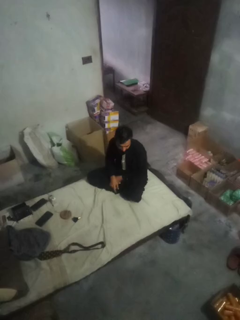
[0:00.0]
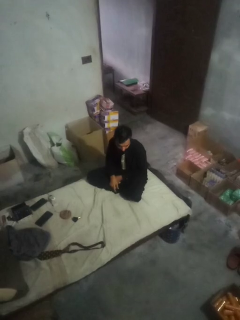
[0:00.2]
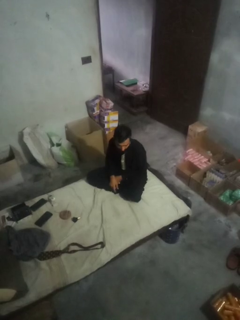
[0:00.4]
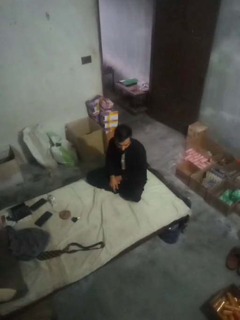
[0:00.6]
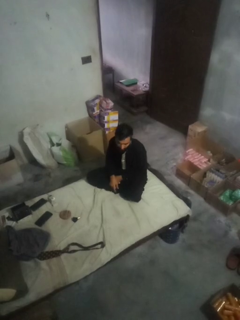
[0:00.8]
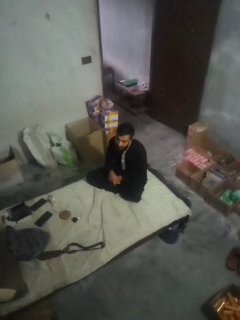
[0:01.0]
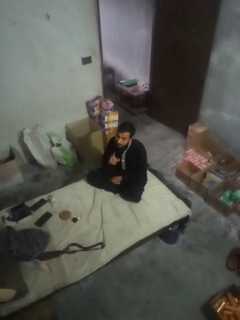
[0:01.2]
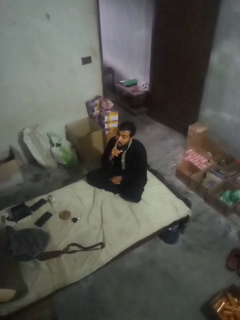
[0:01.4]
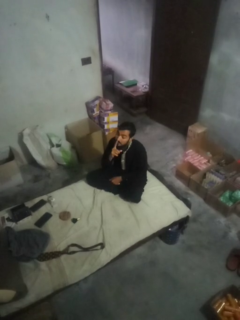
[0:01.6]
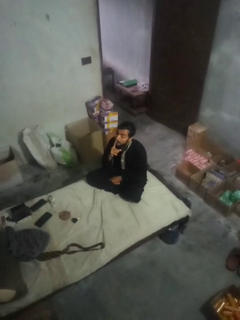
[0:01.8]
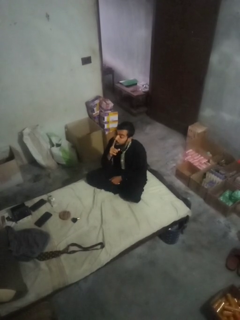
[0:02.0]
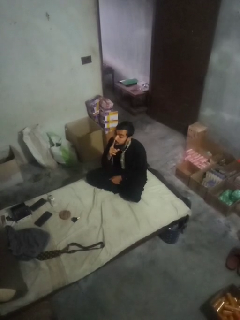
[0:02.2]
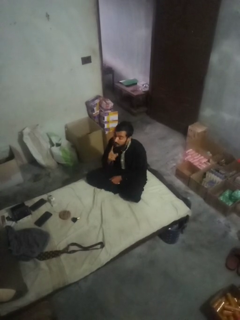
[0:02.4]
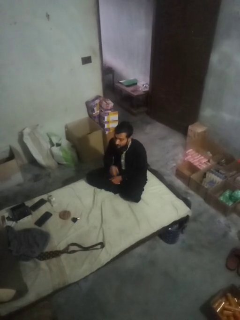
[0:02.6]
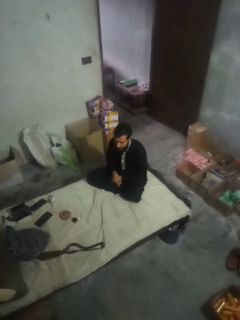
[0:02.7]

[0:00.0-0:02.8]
person gestures be quiet

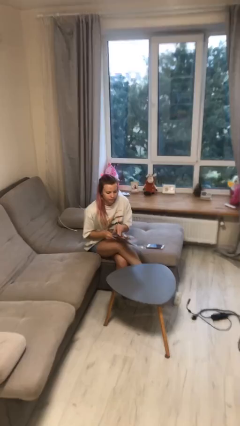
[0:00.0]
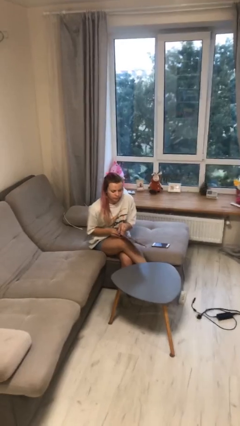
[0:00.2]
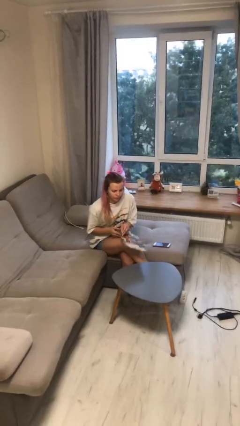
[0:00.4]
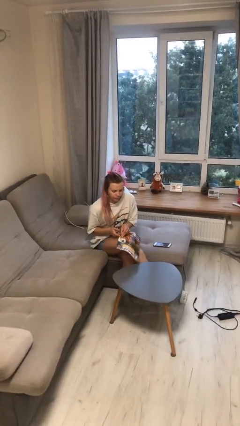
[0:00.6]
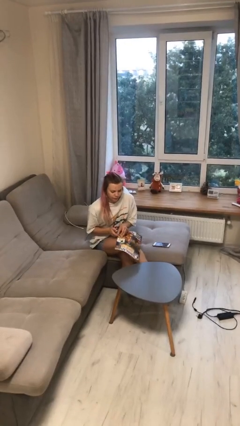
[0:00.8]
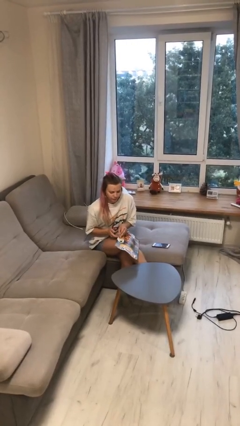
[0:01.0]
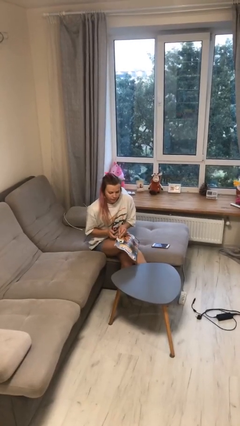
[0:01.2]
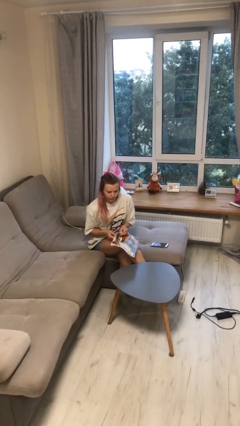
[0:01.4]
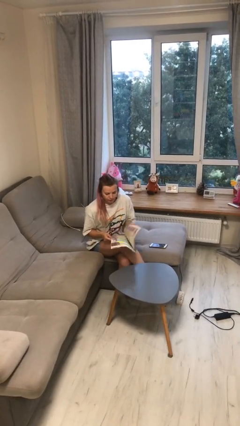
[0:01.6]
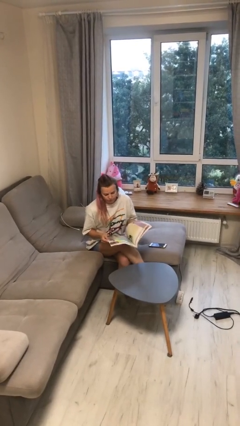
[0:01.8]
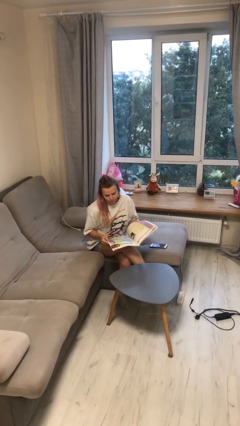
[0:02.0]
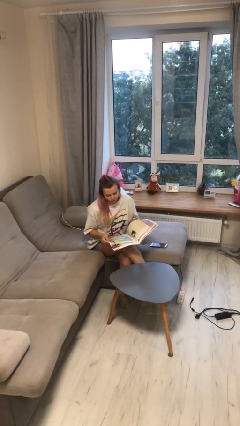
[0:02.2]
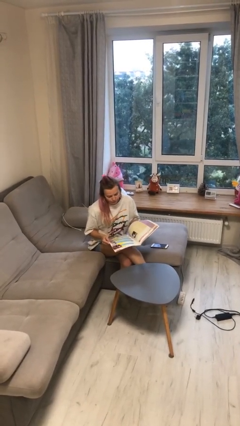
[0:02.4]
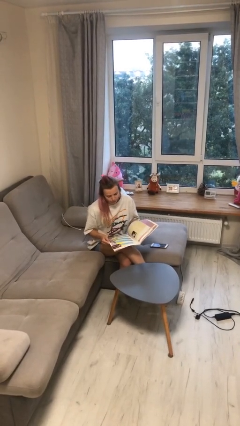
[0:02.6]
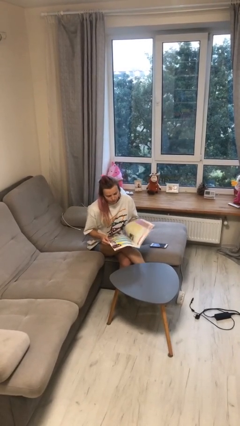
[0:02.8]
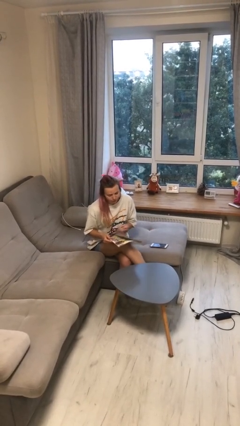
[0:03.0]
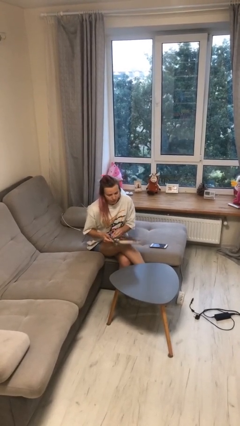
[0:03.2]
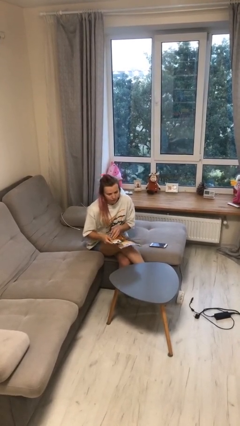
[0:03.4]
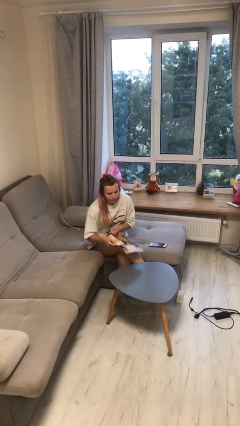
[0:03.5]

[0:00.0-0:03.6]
person reads magazine

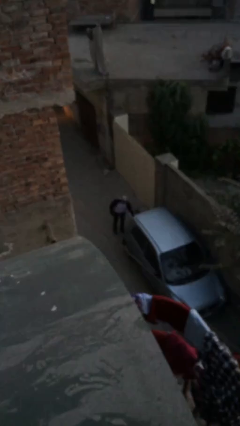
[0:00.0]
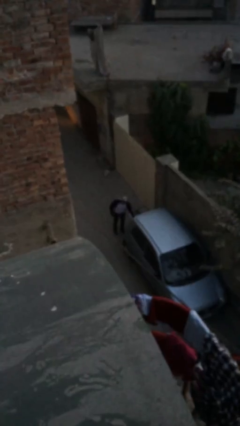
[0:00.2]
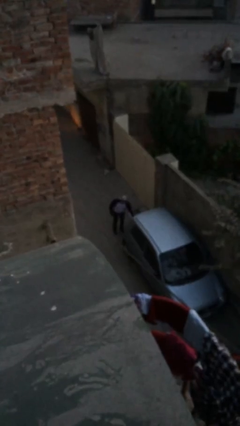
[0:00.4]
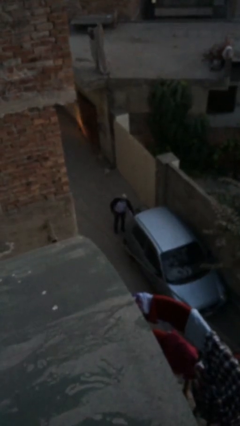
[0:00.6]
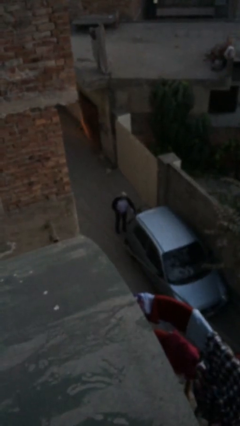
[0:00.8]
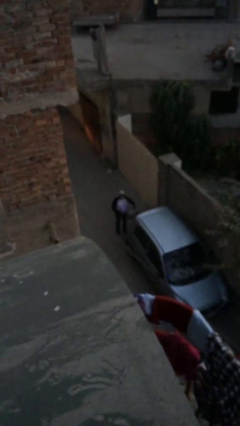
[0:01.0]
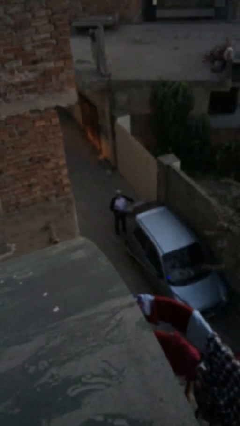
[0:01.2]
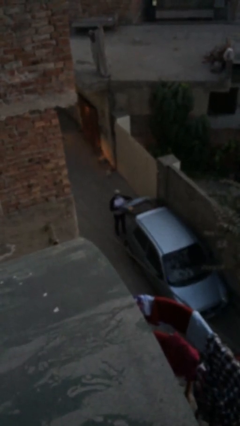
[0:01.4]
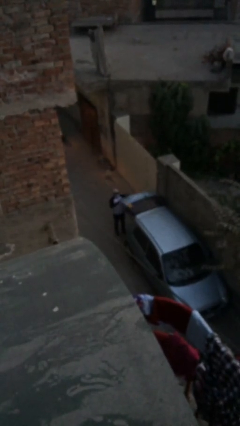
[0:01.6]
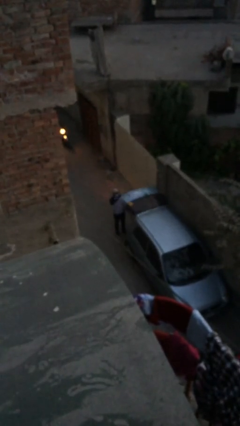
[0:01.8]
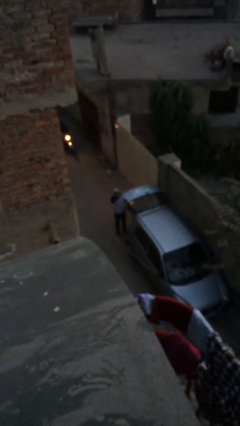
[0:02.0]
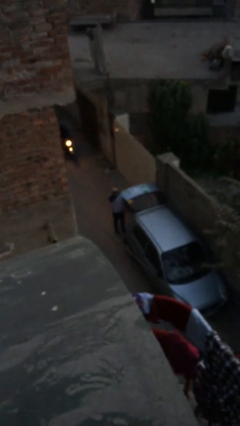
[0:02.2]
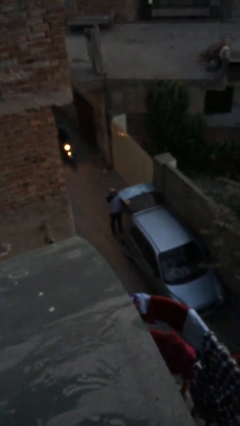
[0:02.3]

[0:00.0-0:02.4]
person opens car trunk

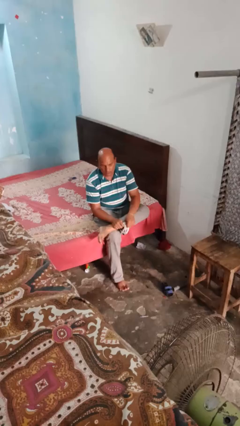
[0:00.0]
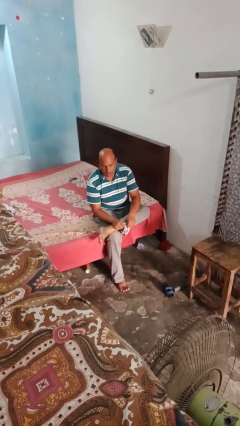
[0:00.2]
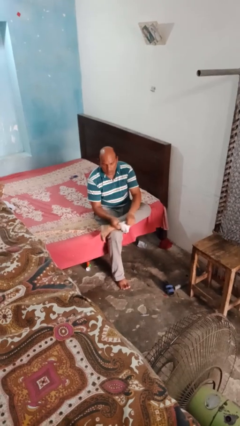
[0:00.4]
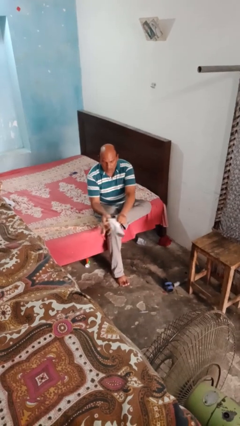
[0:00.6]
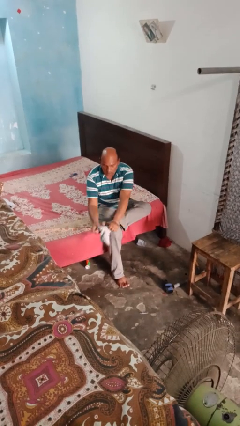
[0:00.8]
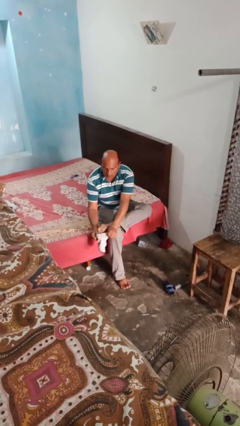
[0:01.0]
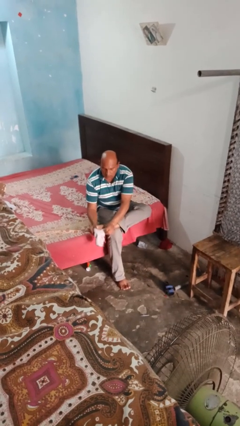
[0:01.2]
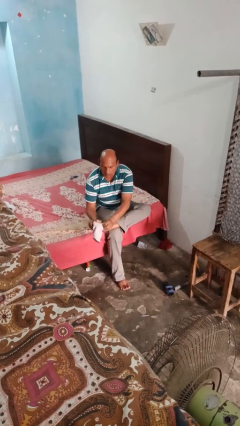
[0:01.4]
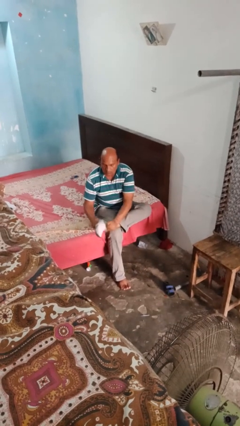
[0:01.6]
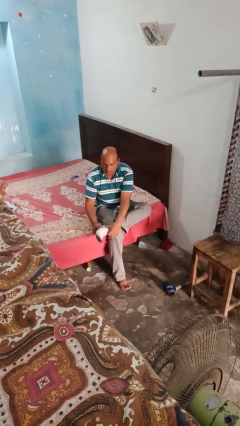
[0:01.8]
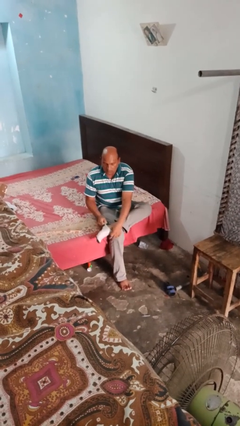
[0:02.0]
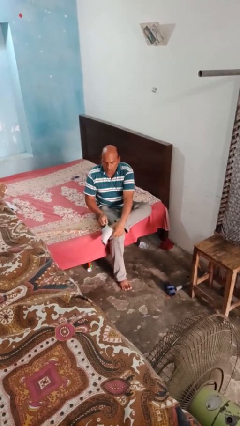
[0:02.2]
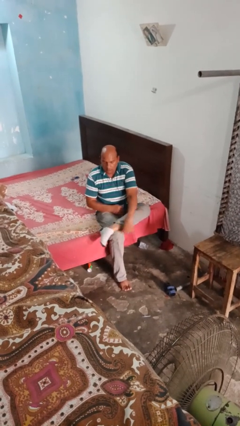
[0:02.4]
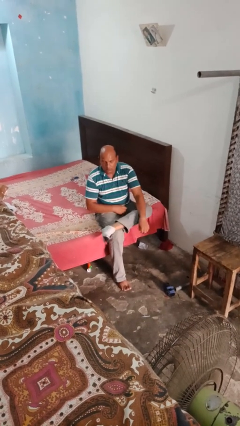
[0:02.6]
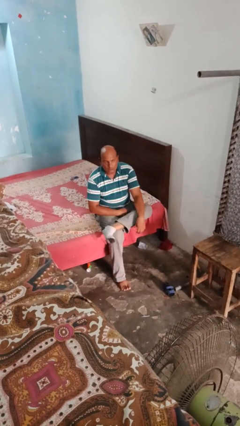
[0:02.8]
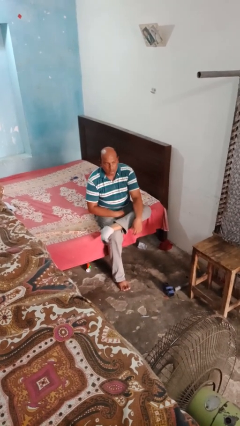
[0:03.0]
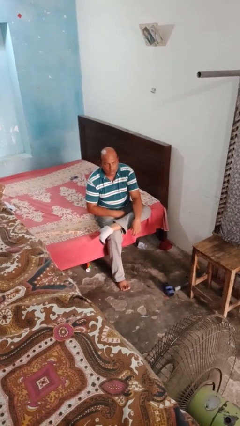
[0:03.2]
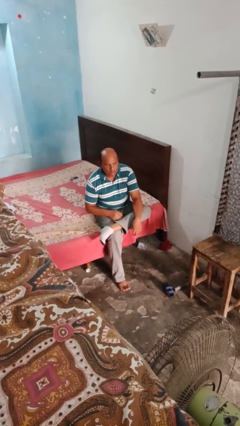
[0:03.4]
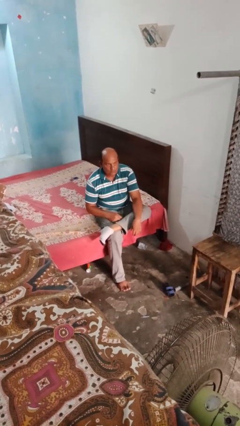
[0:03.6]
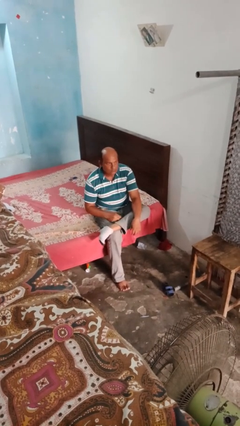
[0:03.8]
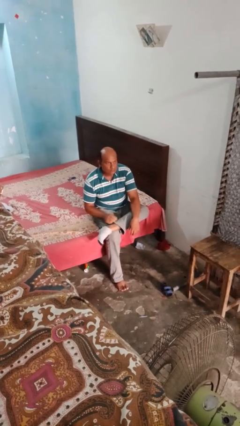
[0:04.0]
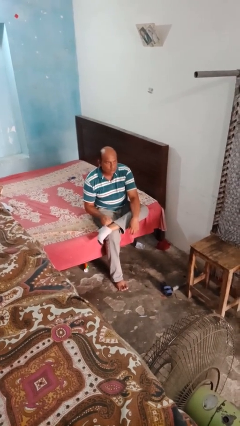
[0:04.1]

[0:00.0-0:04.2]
person puts on socks

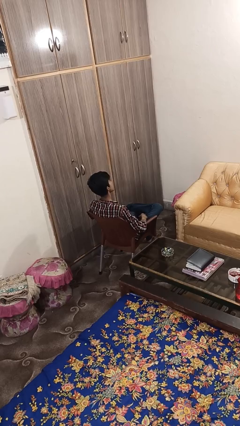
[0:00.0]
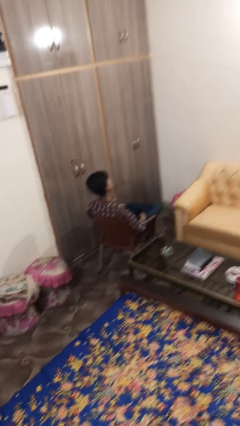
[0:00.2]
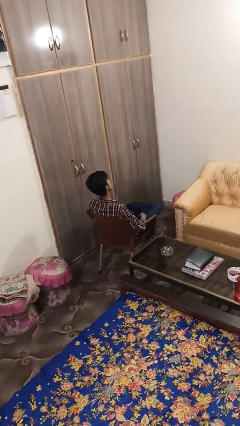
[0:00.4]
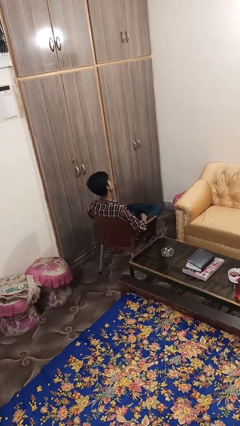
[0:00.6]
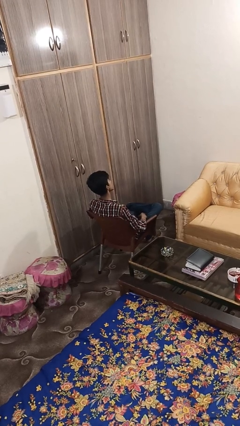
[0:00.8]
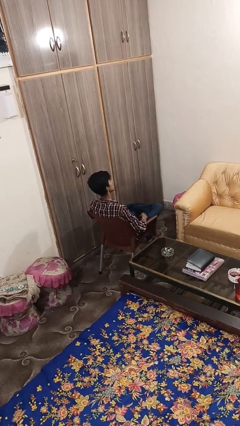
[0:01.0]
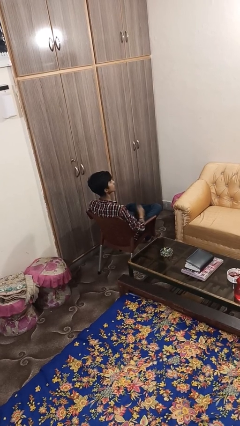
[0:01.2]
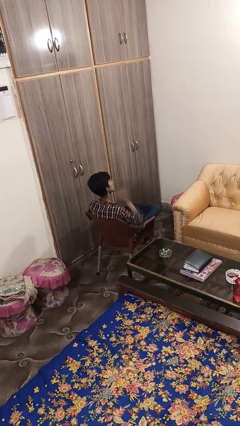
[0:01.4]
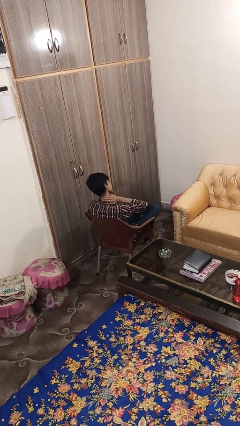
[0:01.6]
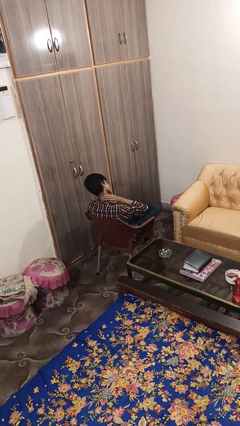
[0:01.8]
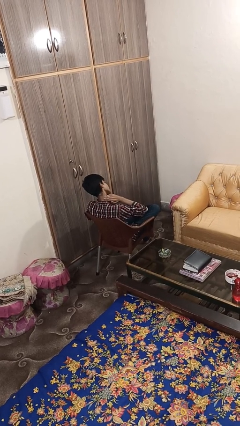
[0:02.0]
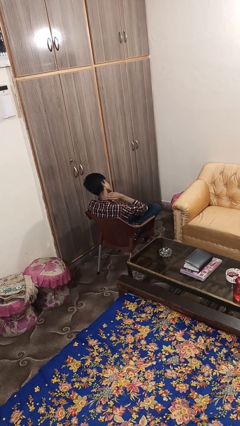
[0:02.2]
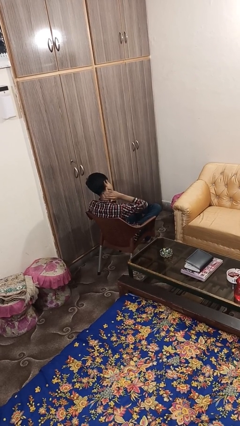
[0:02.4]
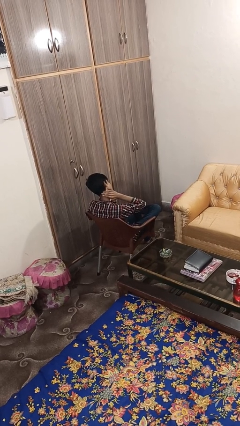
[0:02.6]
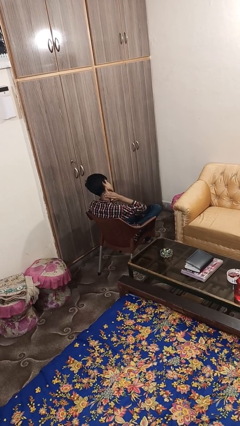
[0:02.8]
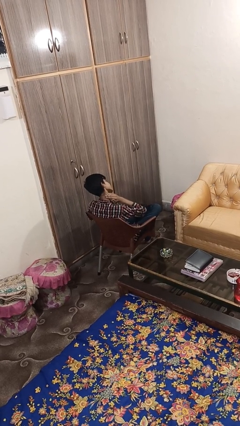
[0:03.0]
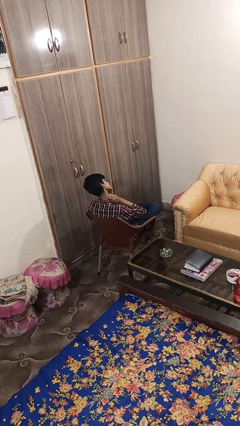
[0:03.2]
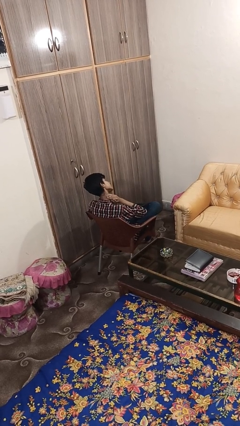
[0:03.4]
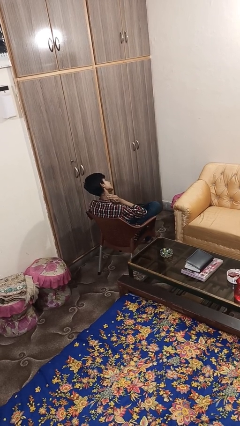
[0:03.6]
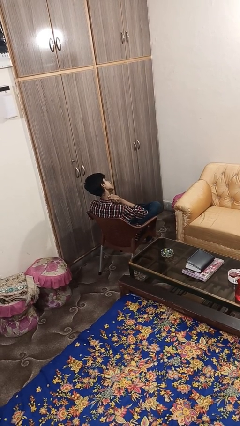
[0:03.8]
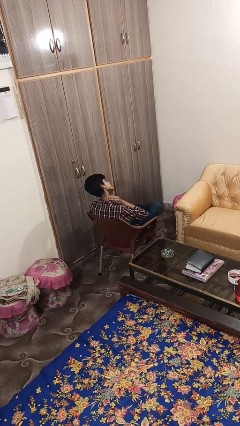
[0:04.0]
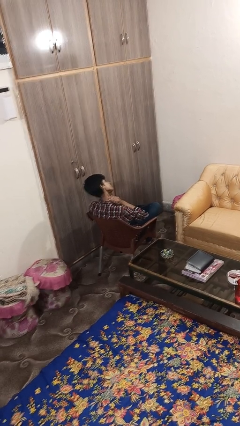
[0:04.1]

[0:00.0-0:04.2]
person swats bug

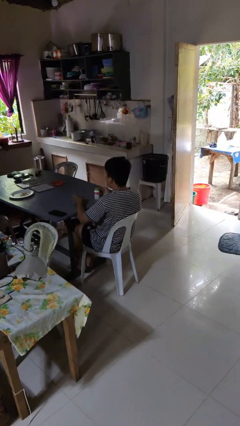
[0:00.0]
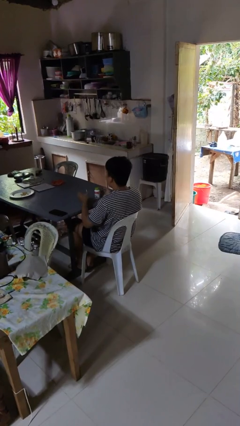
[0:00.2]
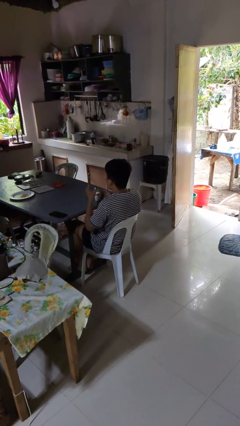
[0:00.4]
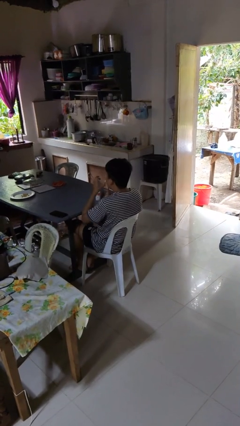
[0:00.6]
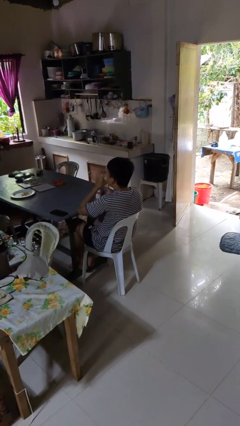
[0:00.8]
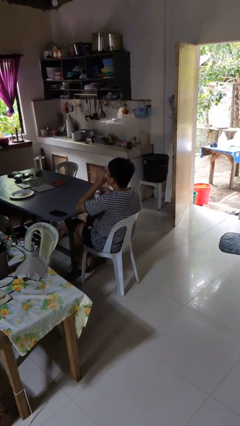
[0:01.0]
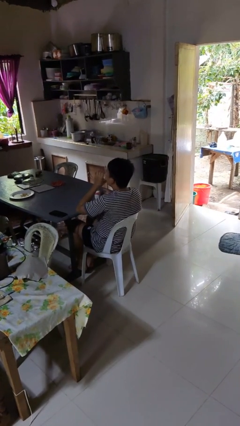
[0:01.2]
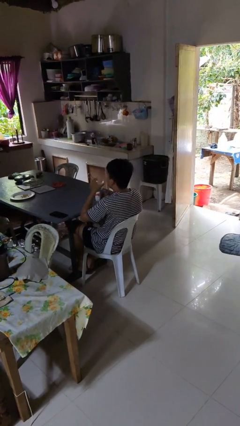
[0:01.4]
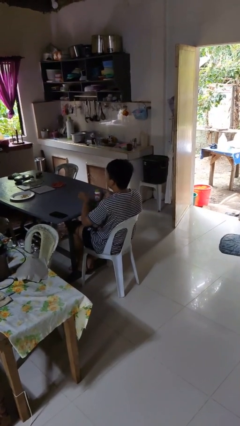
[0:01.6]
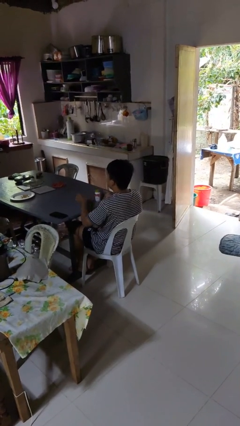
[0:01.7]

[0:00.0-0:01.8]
person drinks from cup
